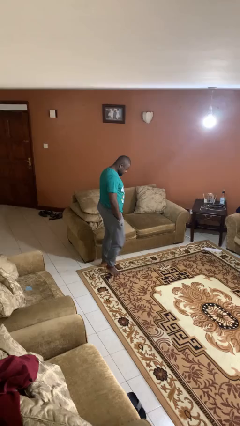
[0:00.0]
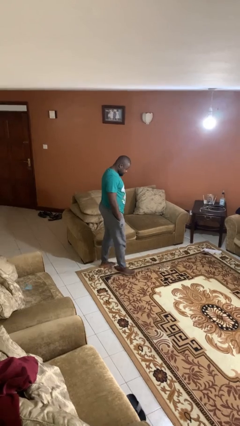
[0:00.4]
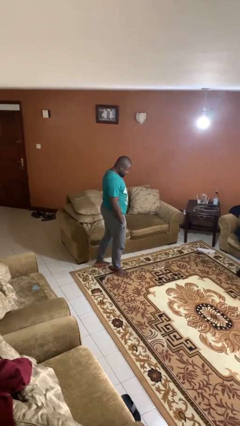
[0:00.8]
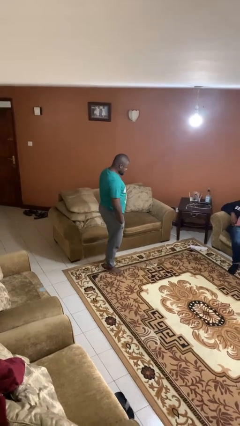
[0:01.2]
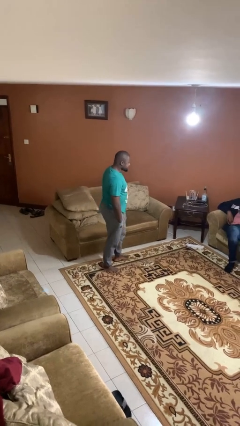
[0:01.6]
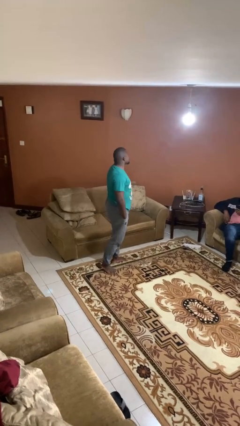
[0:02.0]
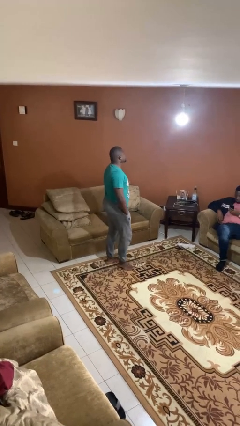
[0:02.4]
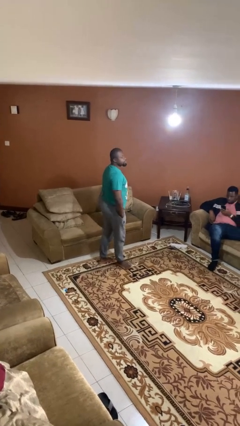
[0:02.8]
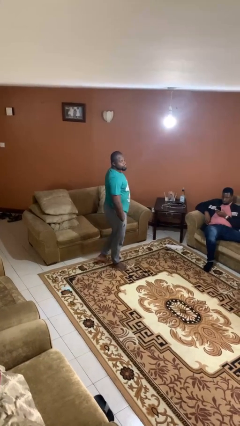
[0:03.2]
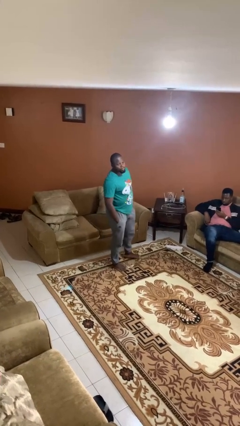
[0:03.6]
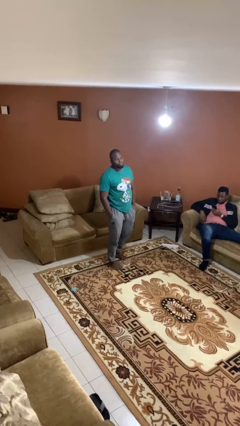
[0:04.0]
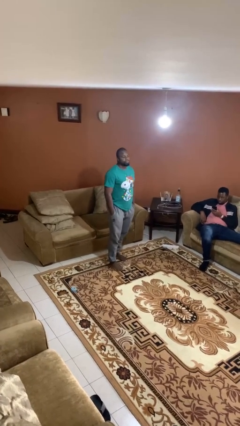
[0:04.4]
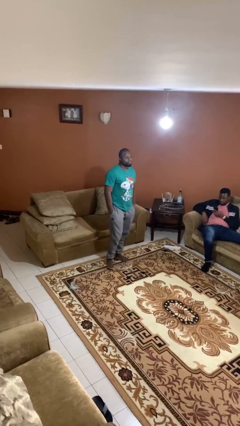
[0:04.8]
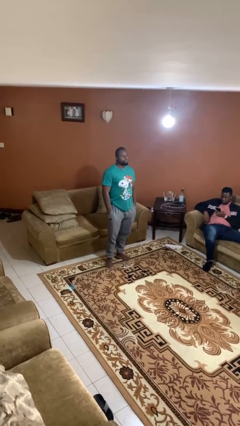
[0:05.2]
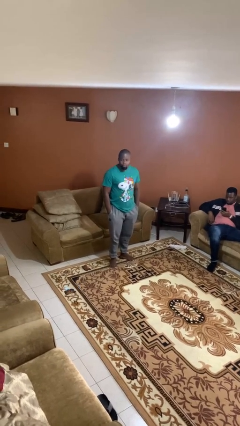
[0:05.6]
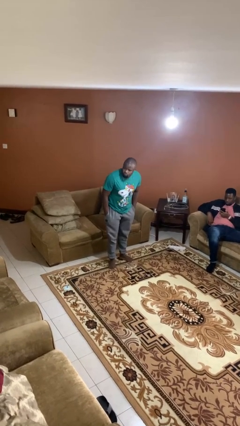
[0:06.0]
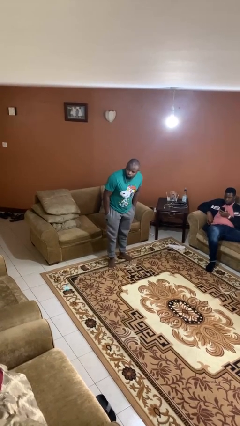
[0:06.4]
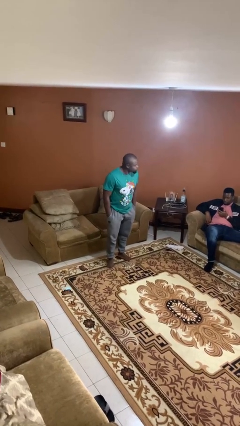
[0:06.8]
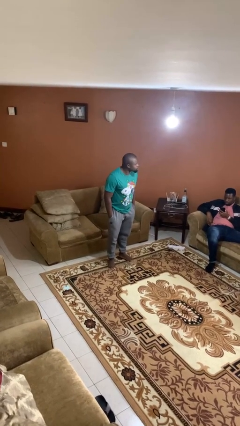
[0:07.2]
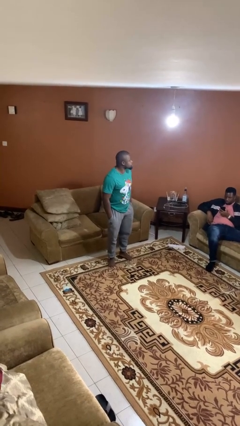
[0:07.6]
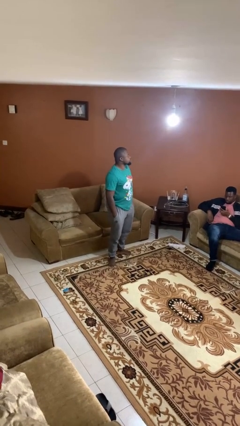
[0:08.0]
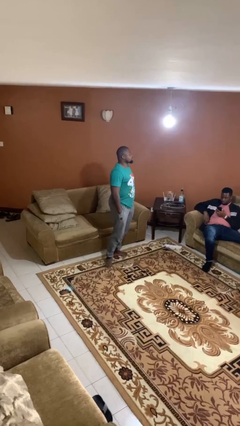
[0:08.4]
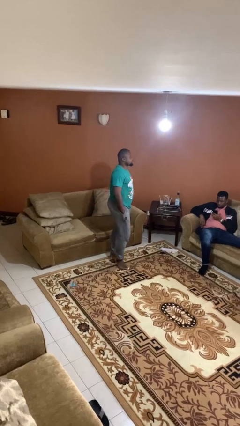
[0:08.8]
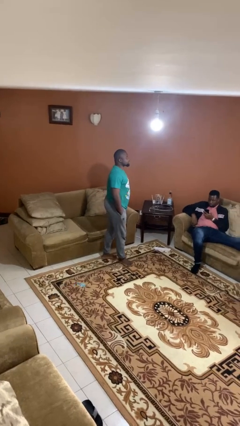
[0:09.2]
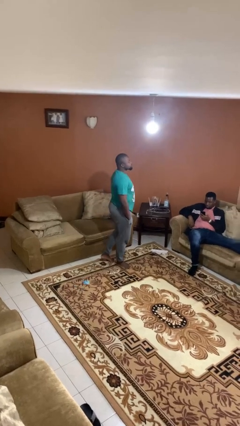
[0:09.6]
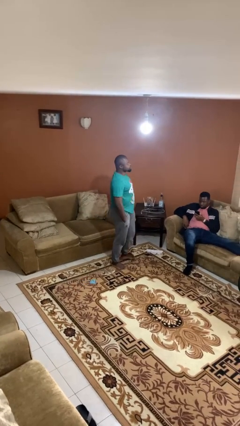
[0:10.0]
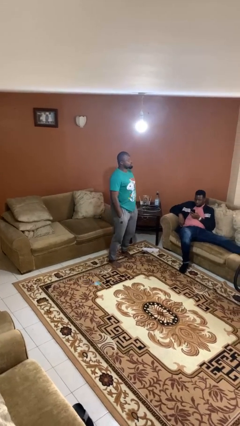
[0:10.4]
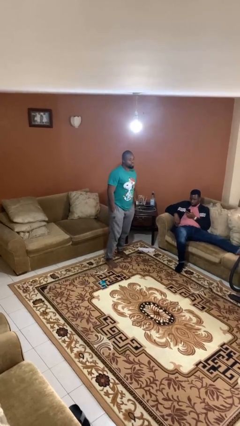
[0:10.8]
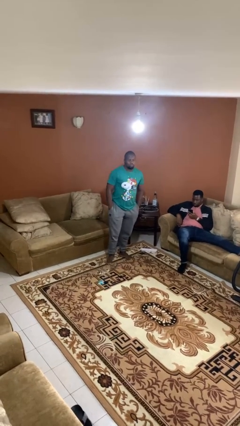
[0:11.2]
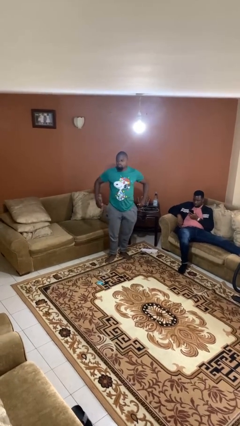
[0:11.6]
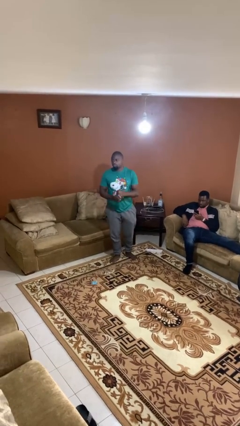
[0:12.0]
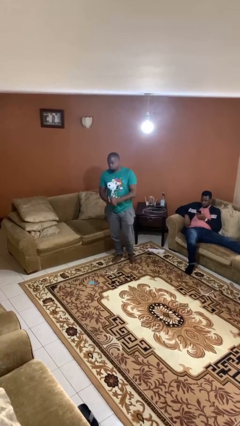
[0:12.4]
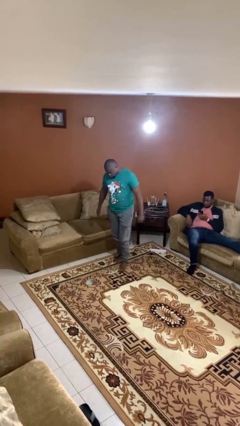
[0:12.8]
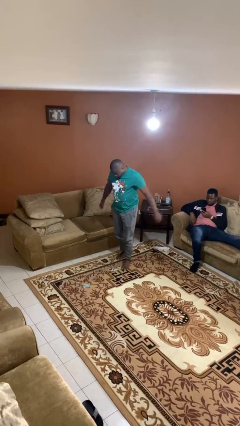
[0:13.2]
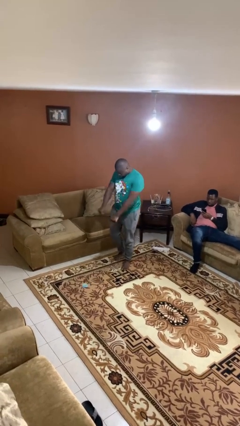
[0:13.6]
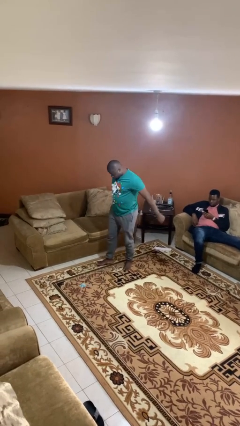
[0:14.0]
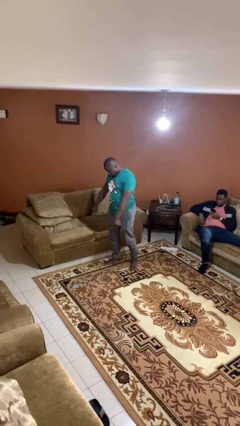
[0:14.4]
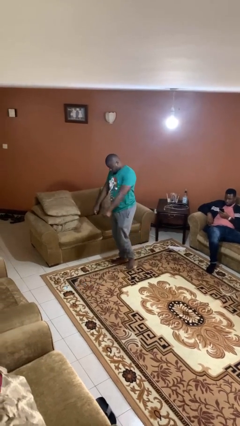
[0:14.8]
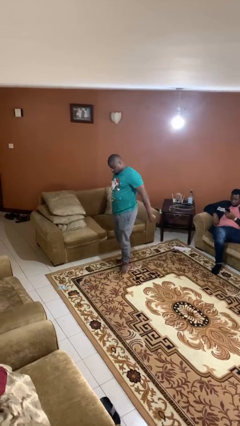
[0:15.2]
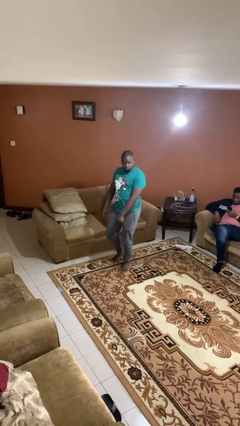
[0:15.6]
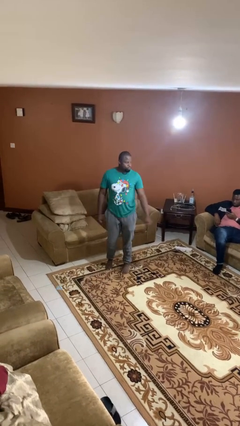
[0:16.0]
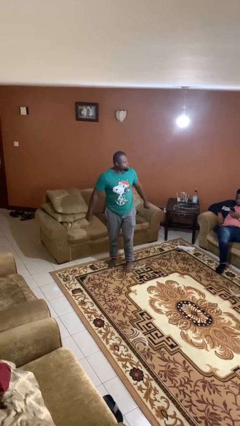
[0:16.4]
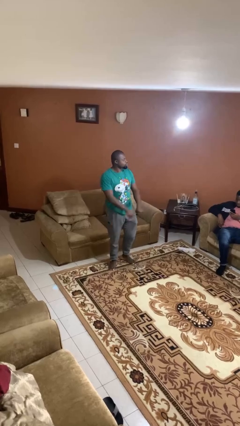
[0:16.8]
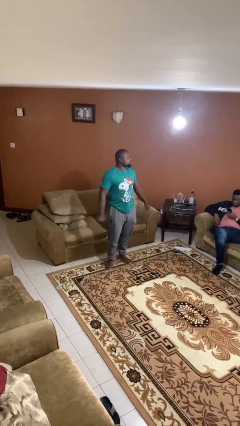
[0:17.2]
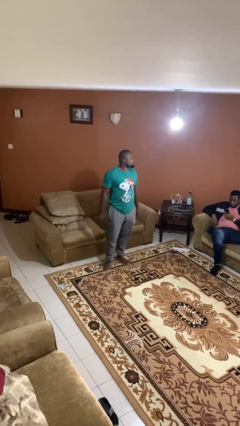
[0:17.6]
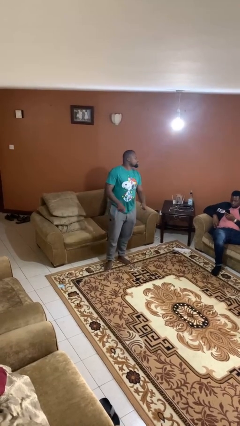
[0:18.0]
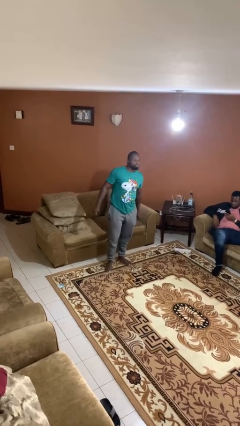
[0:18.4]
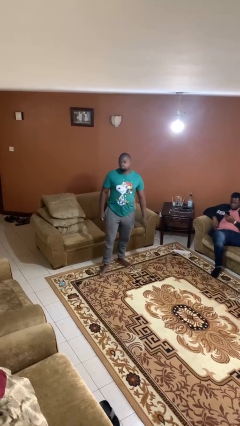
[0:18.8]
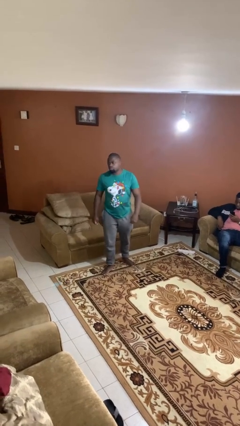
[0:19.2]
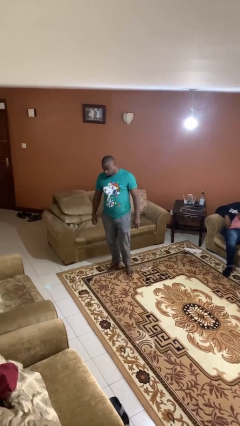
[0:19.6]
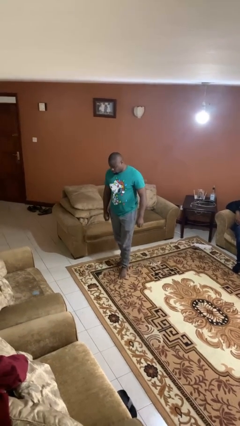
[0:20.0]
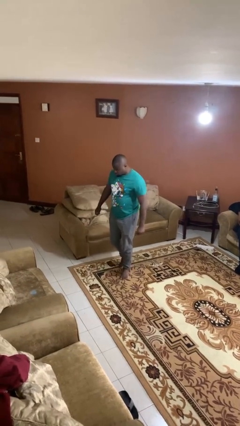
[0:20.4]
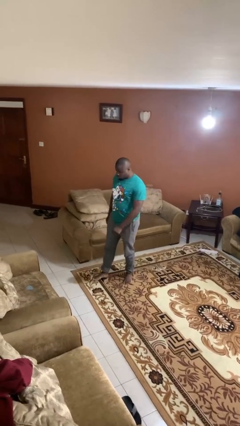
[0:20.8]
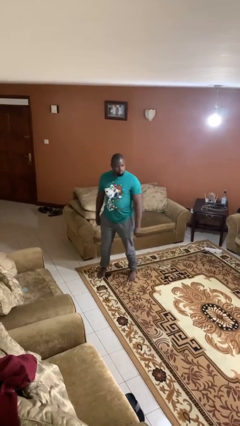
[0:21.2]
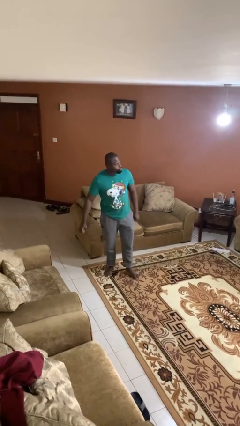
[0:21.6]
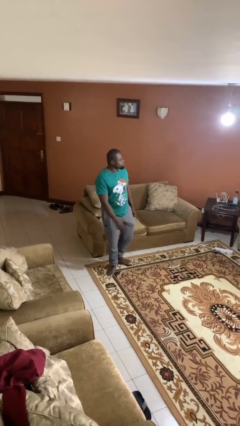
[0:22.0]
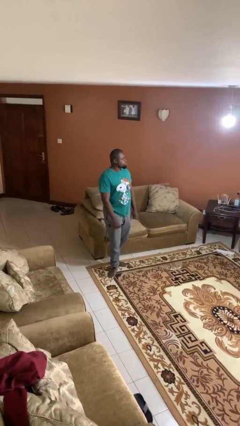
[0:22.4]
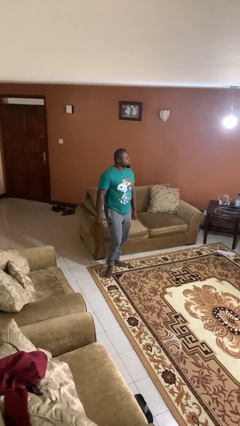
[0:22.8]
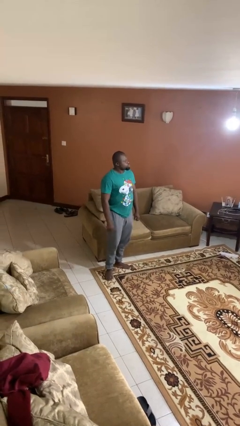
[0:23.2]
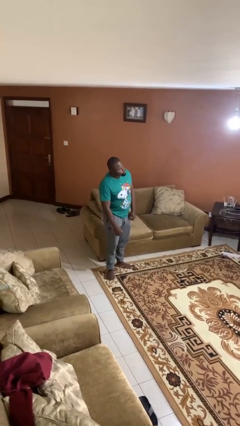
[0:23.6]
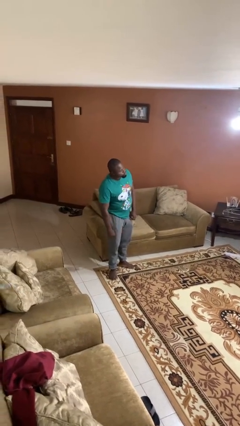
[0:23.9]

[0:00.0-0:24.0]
person walks

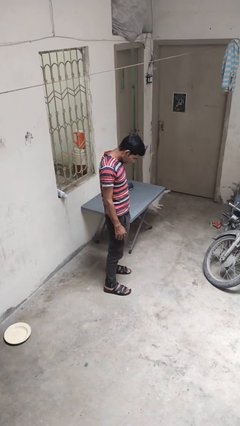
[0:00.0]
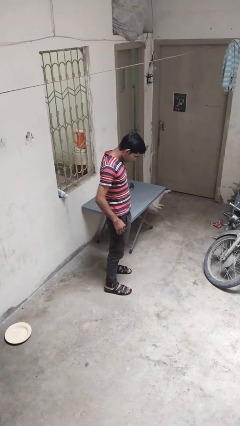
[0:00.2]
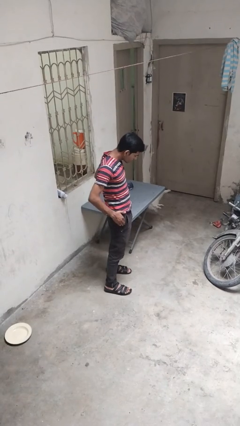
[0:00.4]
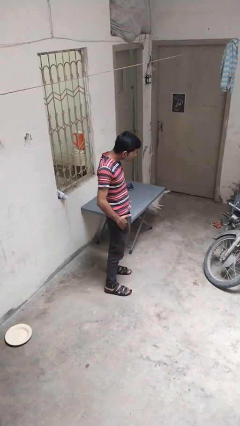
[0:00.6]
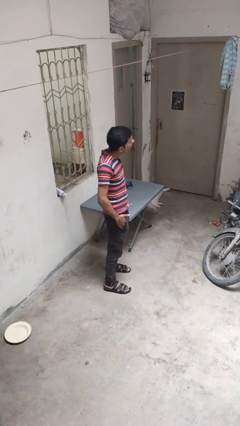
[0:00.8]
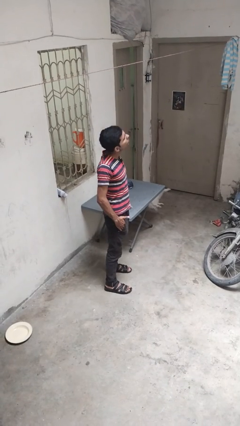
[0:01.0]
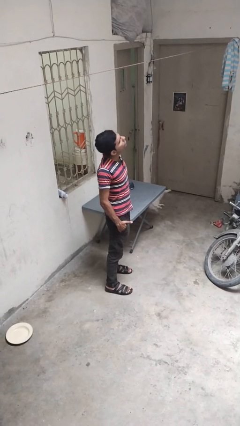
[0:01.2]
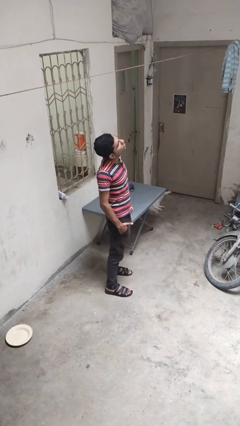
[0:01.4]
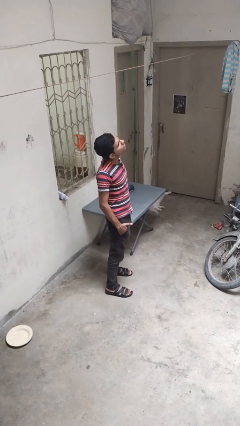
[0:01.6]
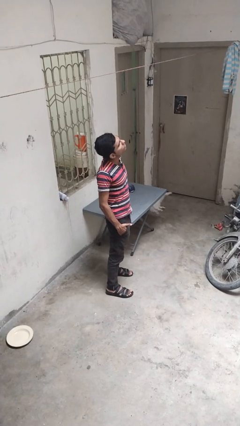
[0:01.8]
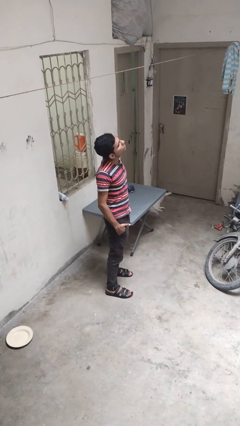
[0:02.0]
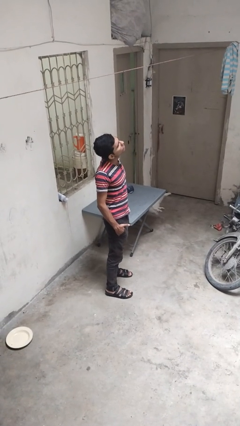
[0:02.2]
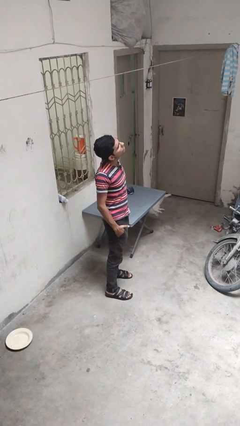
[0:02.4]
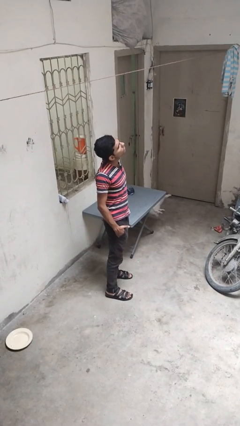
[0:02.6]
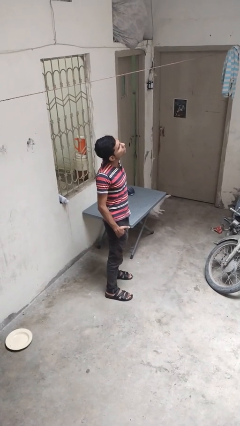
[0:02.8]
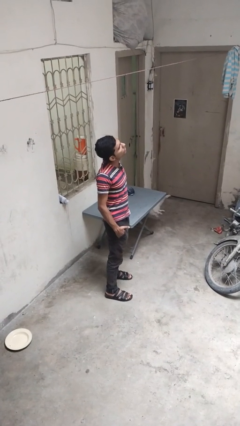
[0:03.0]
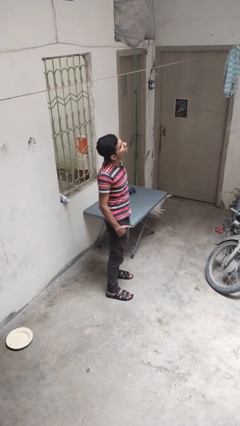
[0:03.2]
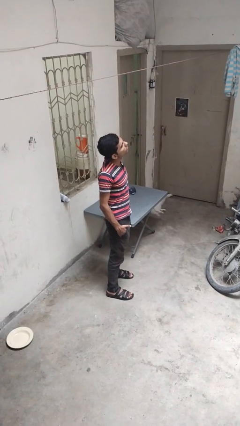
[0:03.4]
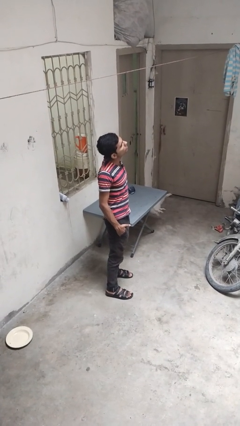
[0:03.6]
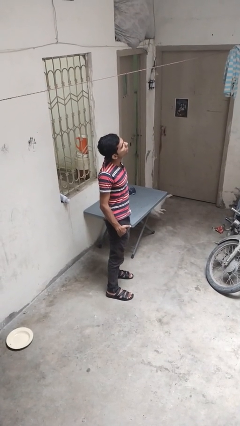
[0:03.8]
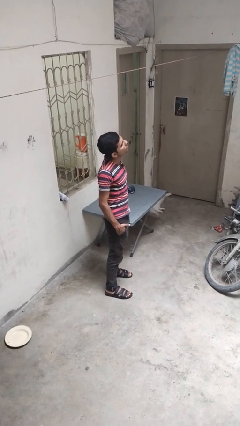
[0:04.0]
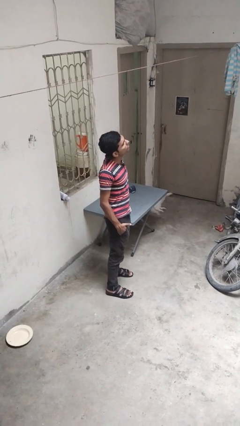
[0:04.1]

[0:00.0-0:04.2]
person puts hands in back pockets

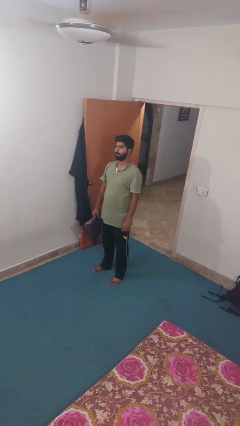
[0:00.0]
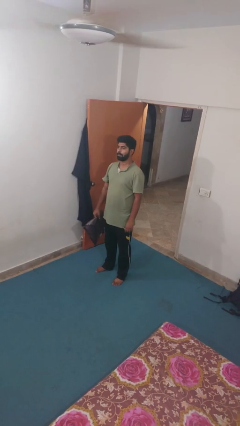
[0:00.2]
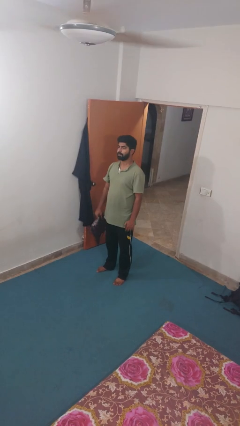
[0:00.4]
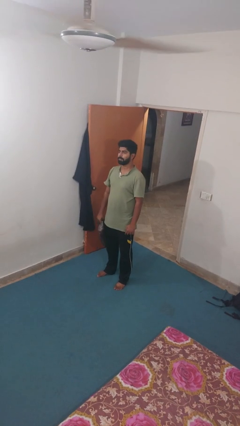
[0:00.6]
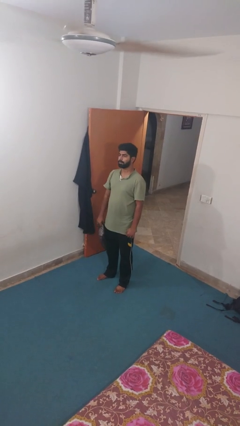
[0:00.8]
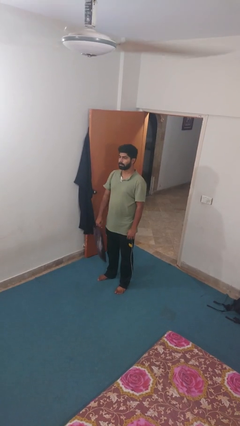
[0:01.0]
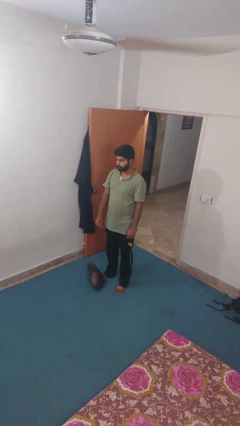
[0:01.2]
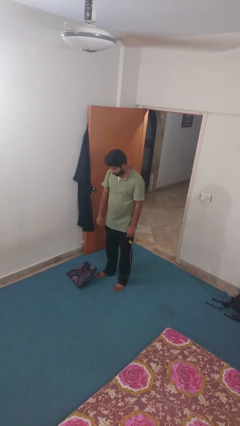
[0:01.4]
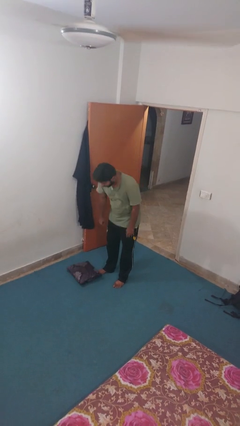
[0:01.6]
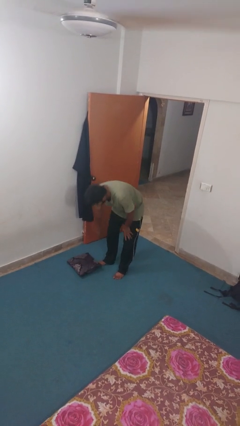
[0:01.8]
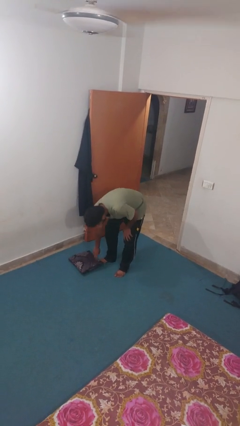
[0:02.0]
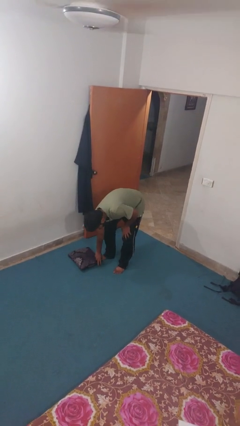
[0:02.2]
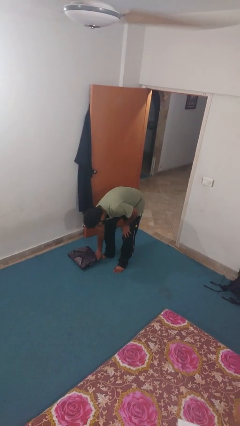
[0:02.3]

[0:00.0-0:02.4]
person drops object
